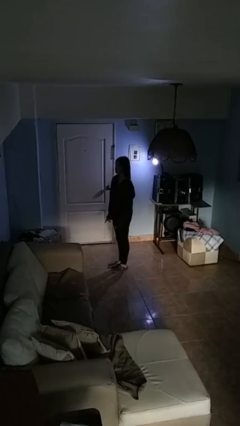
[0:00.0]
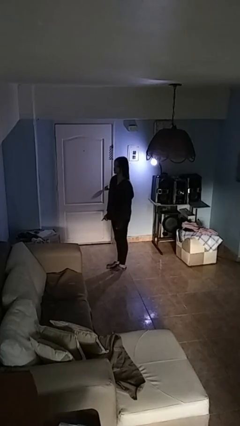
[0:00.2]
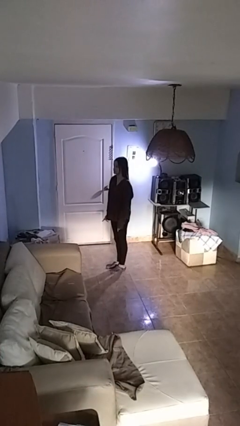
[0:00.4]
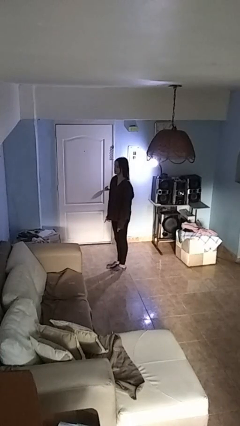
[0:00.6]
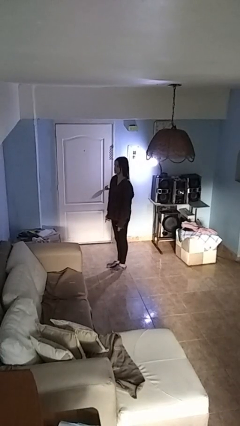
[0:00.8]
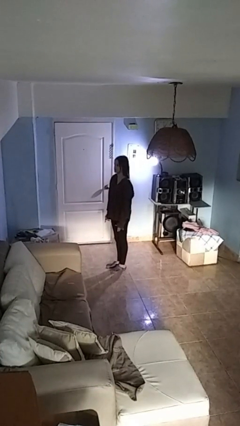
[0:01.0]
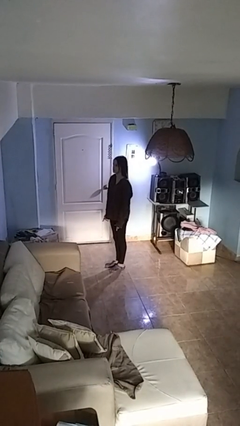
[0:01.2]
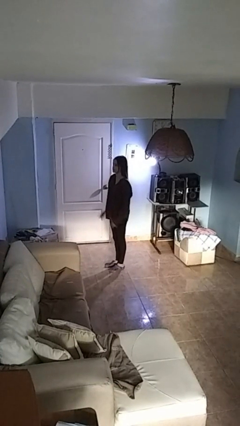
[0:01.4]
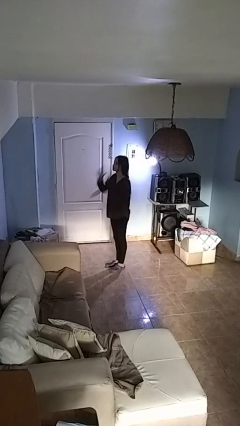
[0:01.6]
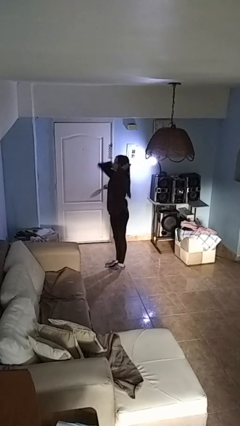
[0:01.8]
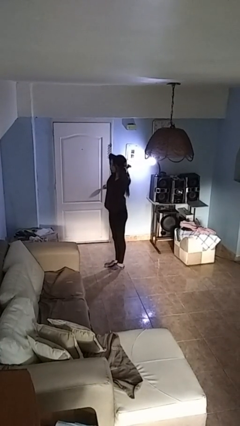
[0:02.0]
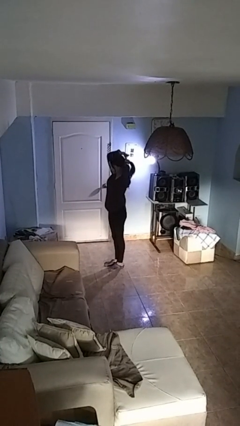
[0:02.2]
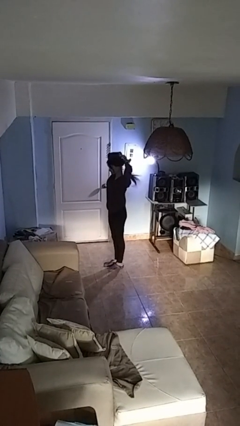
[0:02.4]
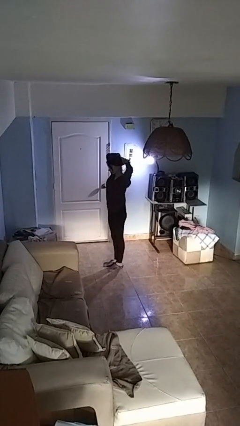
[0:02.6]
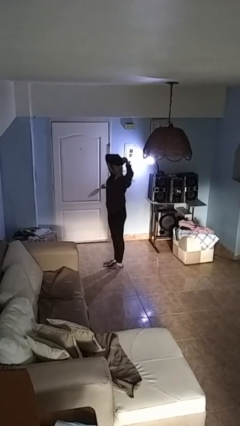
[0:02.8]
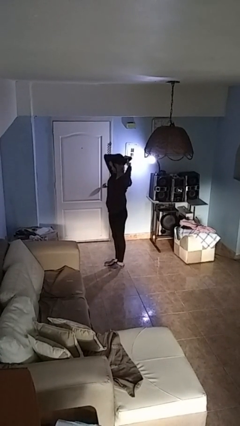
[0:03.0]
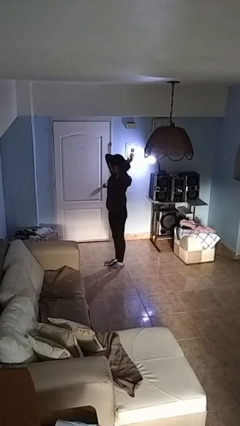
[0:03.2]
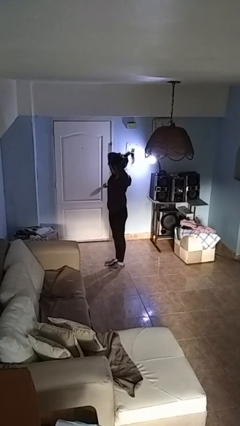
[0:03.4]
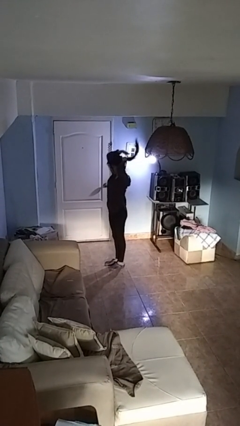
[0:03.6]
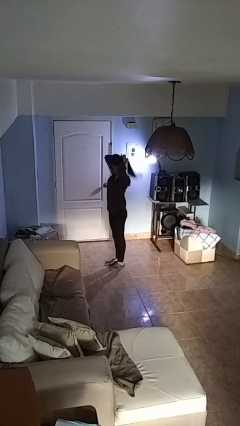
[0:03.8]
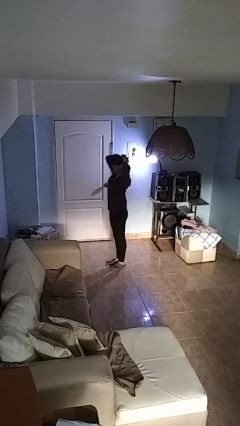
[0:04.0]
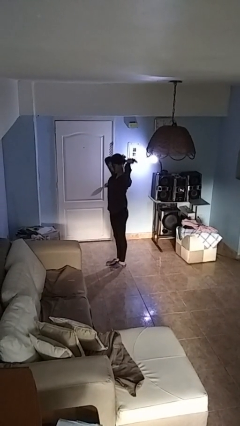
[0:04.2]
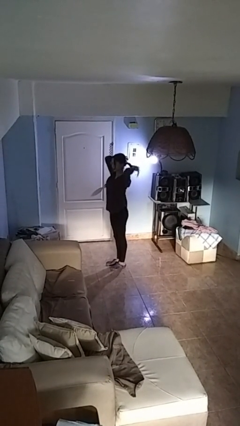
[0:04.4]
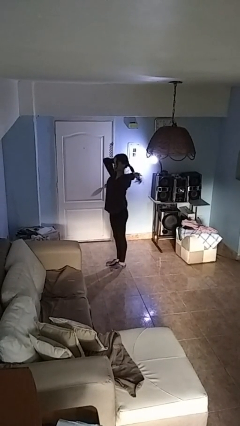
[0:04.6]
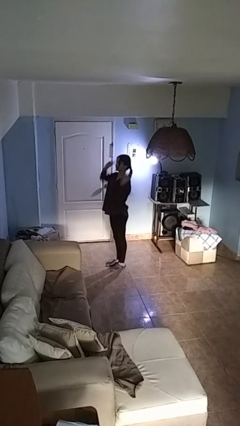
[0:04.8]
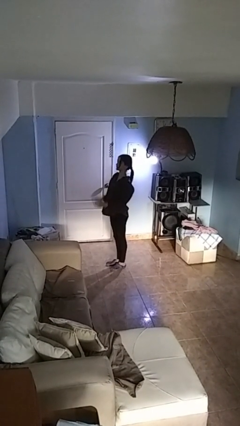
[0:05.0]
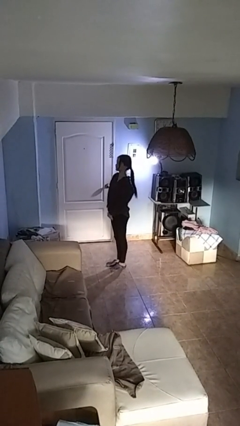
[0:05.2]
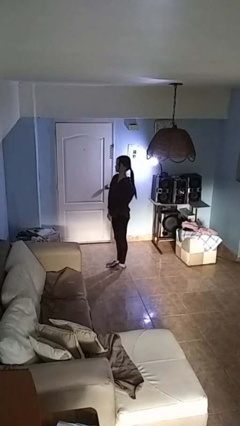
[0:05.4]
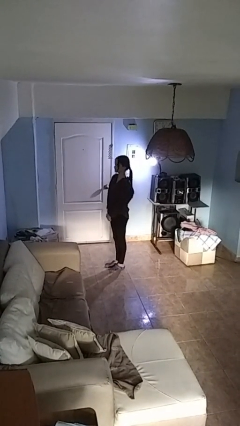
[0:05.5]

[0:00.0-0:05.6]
person puts hair in ponytail

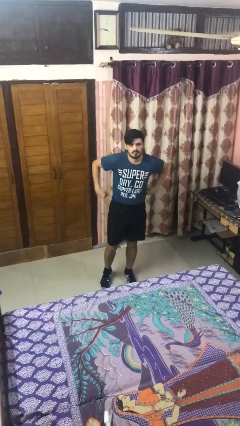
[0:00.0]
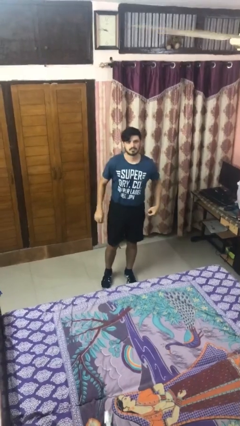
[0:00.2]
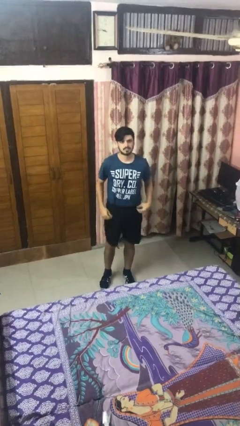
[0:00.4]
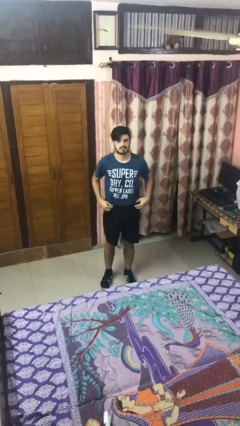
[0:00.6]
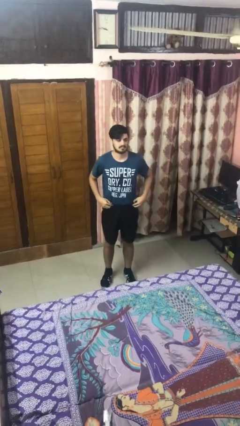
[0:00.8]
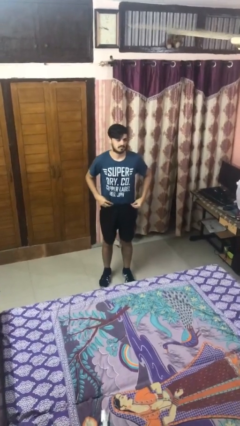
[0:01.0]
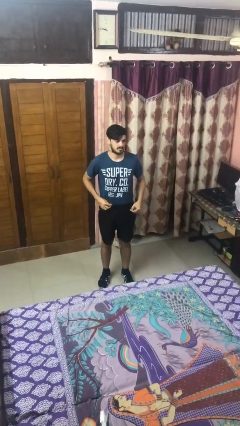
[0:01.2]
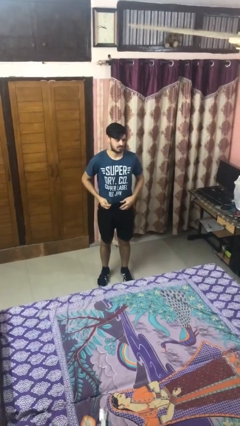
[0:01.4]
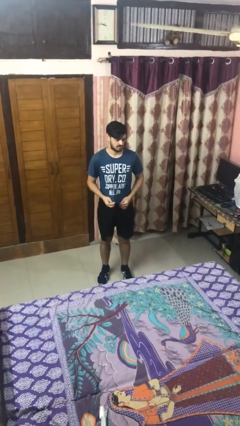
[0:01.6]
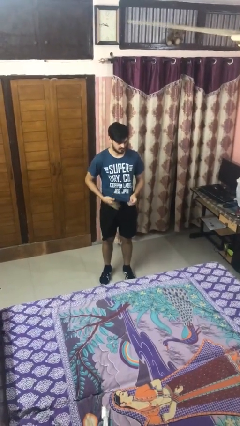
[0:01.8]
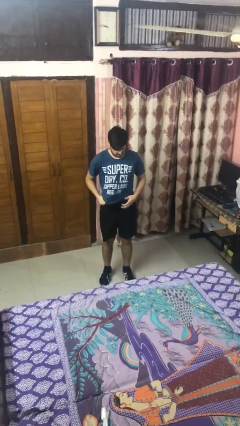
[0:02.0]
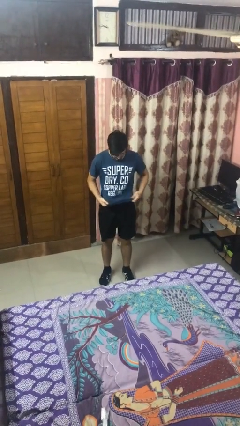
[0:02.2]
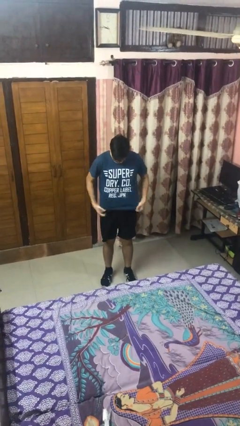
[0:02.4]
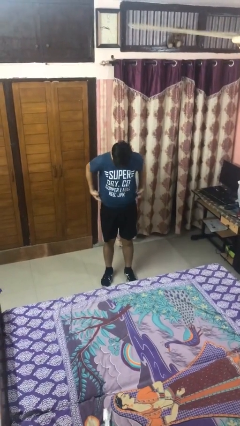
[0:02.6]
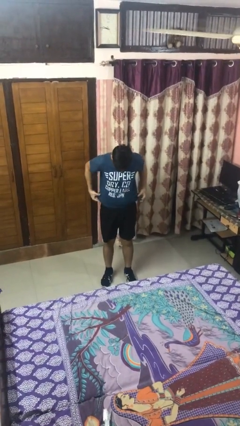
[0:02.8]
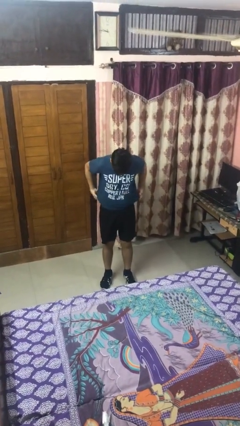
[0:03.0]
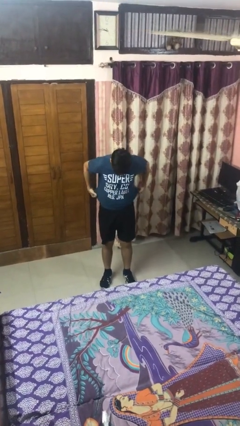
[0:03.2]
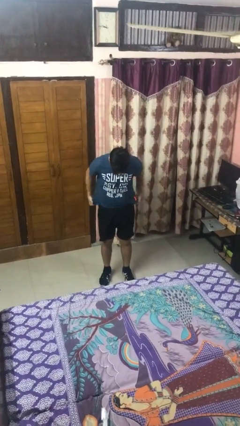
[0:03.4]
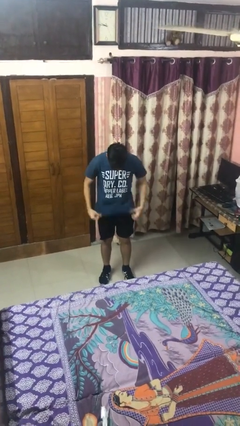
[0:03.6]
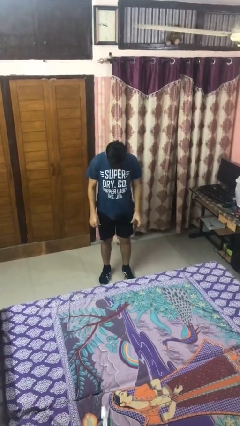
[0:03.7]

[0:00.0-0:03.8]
person untucks shirt

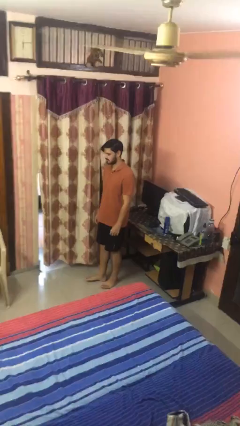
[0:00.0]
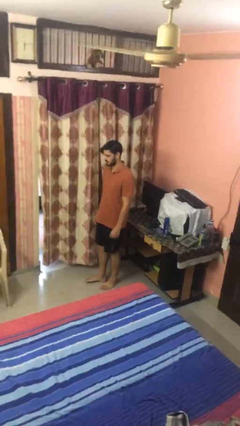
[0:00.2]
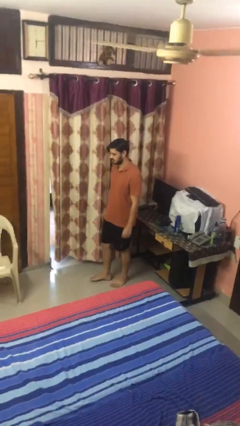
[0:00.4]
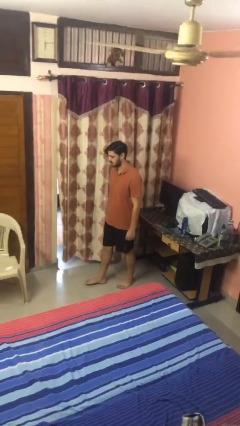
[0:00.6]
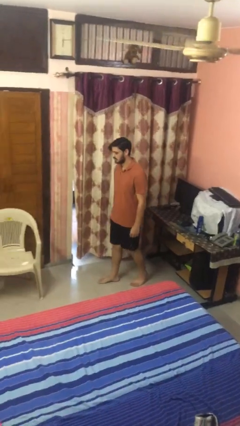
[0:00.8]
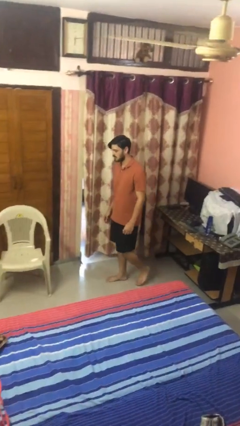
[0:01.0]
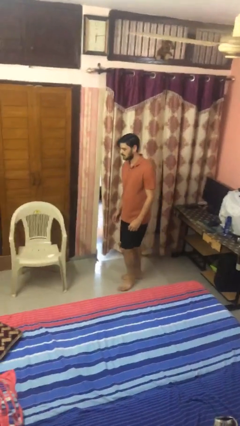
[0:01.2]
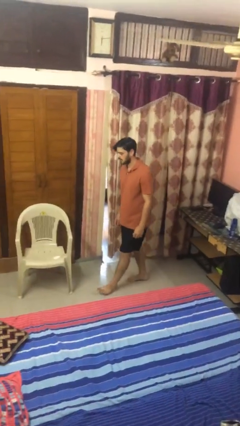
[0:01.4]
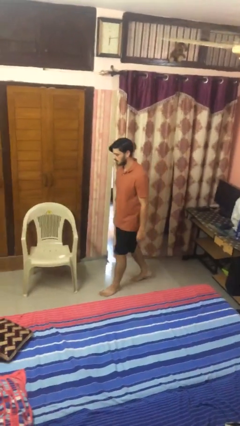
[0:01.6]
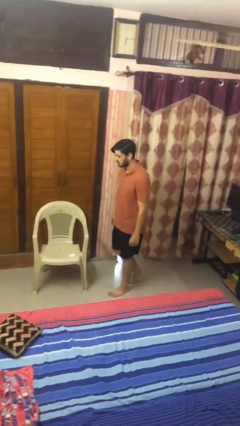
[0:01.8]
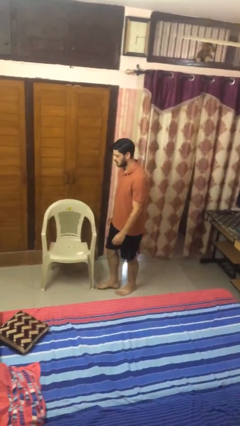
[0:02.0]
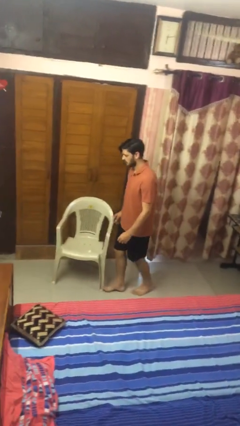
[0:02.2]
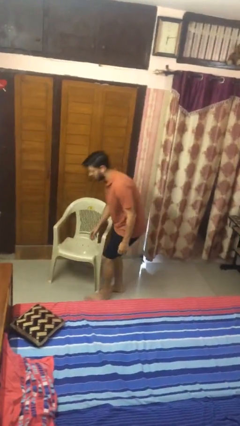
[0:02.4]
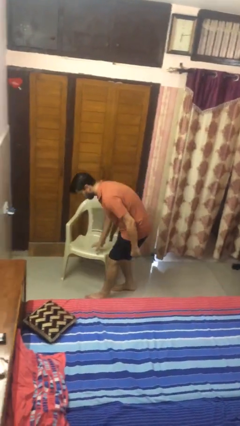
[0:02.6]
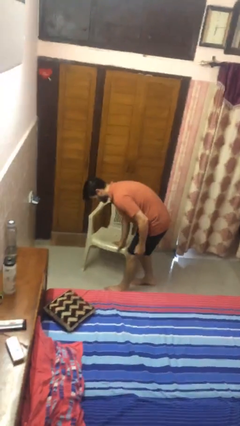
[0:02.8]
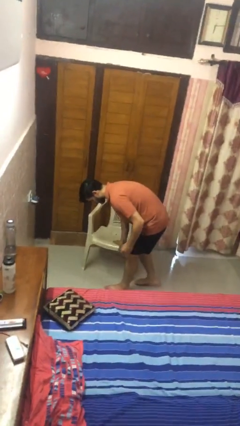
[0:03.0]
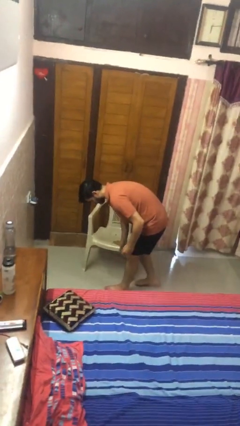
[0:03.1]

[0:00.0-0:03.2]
person stubs toe

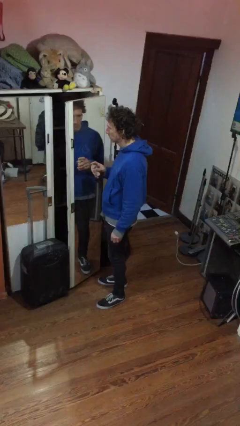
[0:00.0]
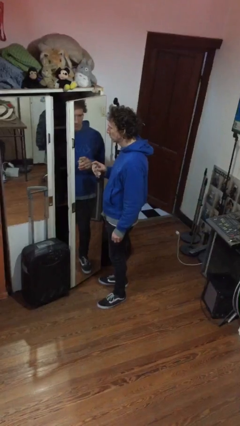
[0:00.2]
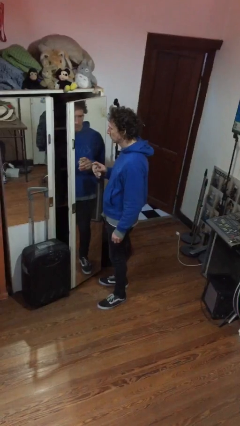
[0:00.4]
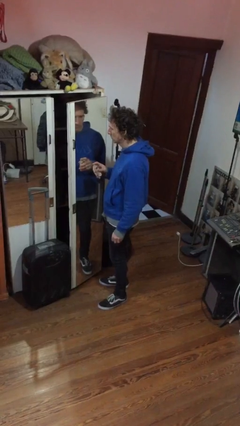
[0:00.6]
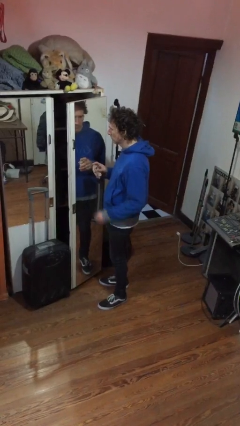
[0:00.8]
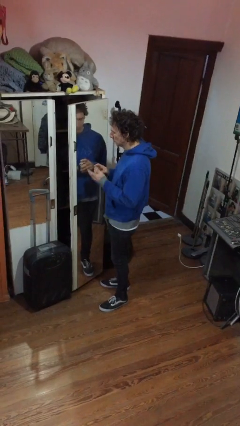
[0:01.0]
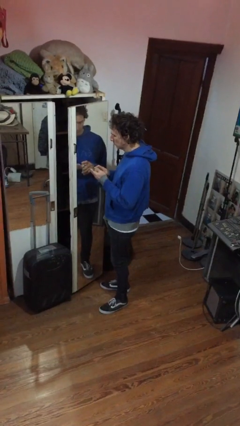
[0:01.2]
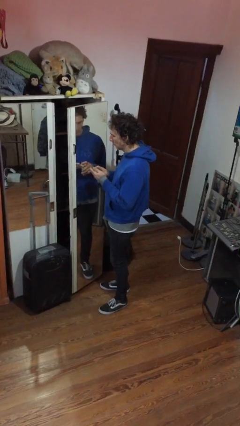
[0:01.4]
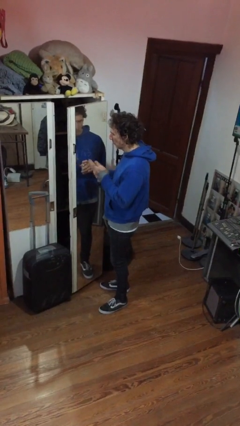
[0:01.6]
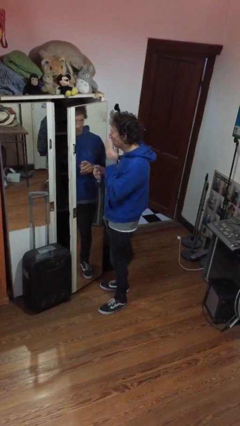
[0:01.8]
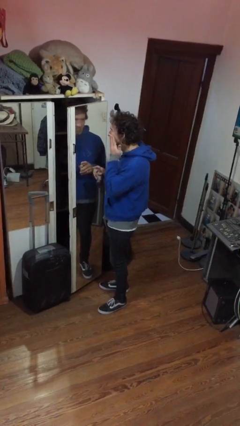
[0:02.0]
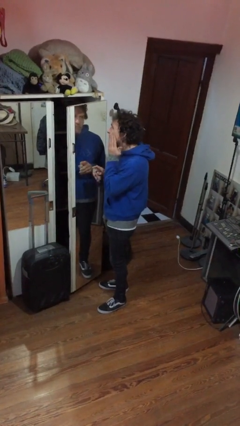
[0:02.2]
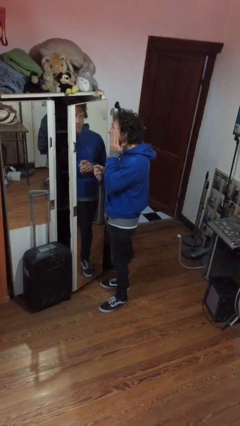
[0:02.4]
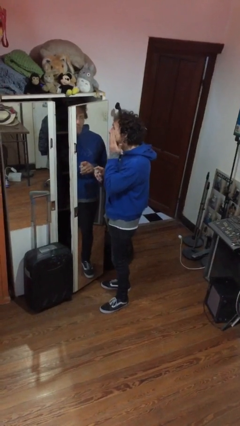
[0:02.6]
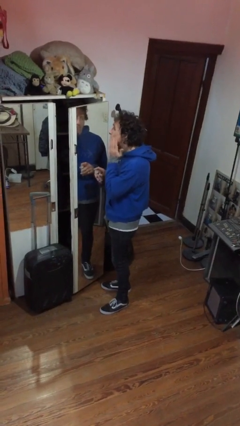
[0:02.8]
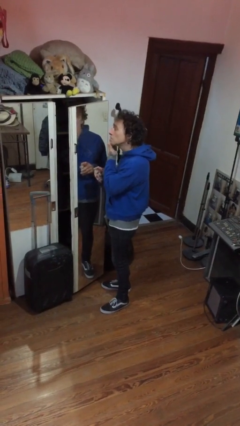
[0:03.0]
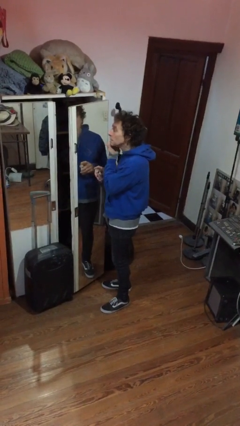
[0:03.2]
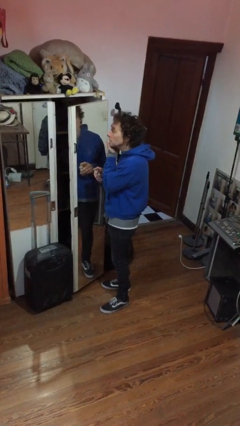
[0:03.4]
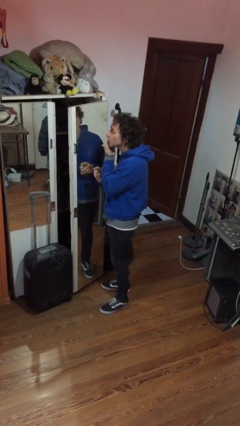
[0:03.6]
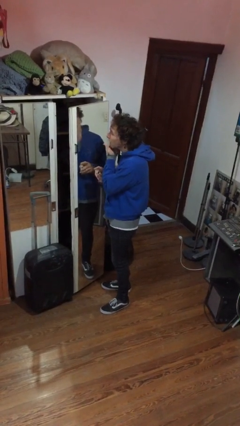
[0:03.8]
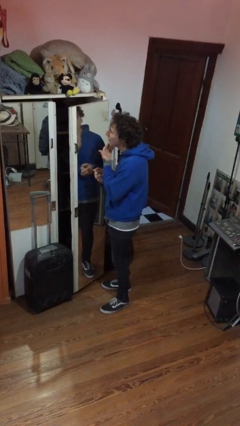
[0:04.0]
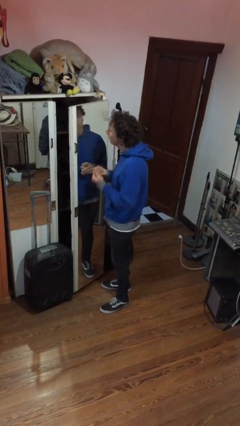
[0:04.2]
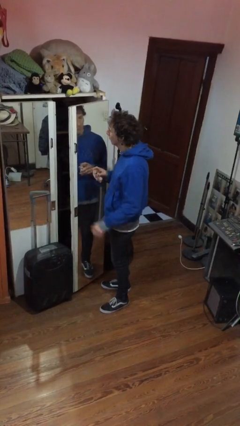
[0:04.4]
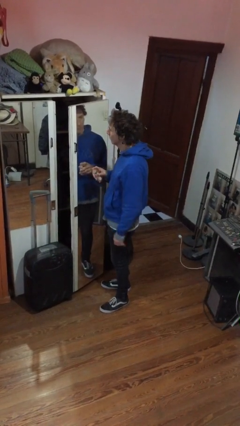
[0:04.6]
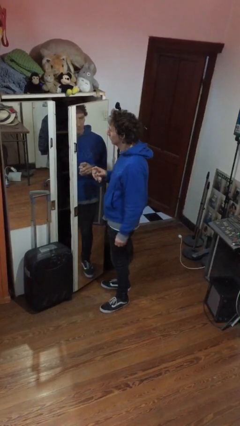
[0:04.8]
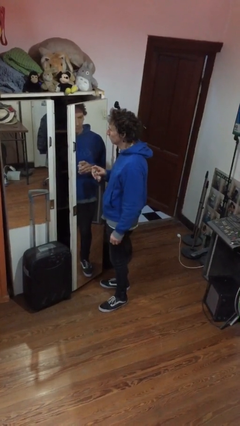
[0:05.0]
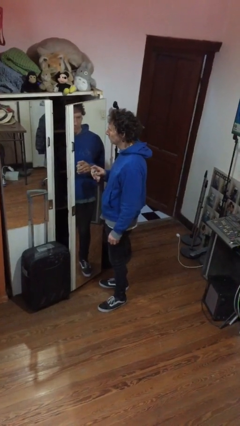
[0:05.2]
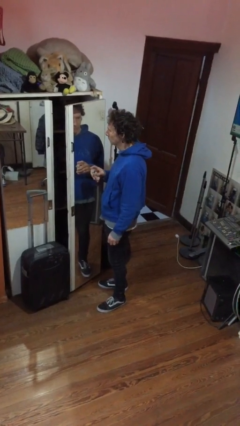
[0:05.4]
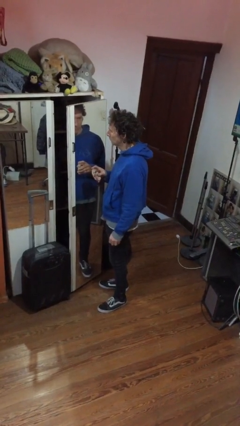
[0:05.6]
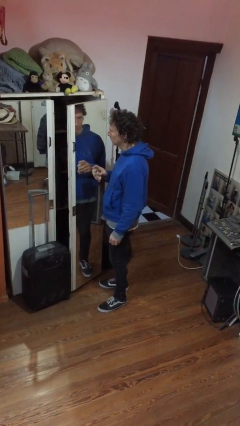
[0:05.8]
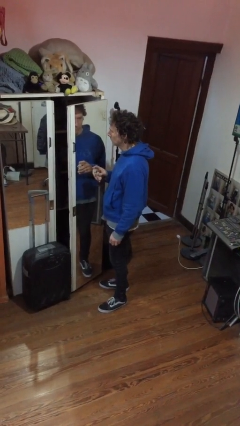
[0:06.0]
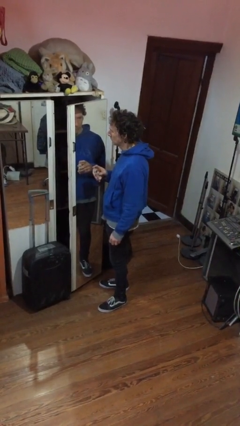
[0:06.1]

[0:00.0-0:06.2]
person applies foundation makeup
